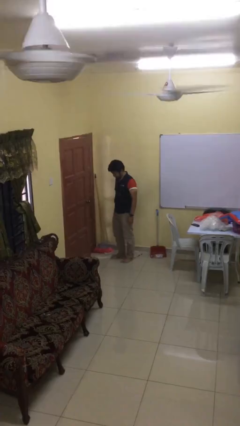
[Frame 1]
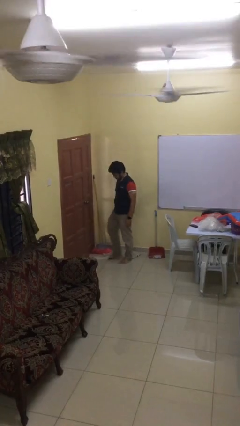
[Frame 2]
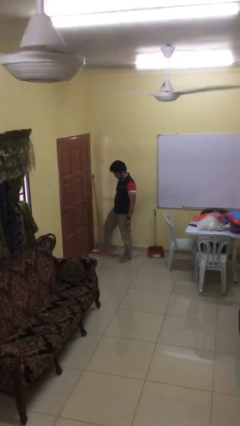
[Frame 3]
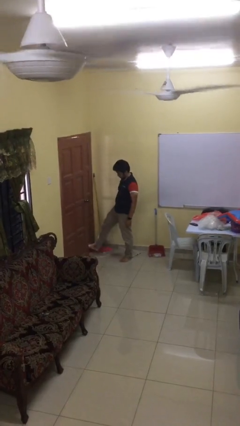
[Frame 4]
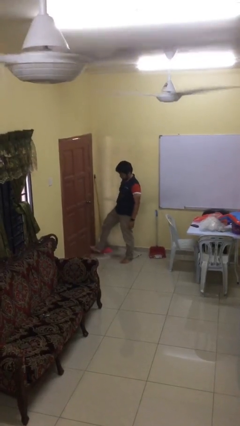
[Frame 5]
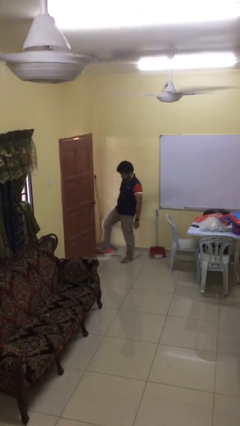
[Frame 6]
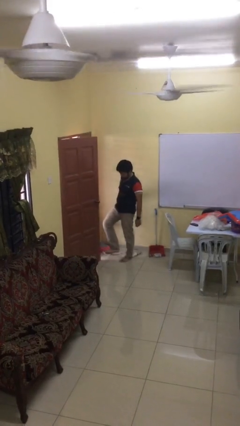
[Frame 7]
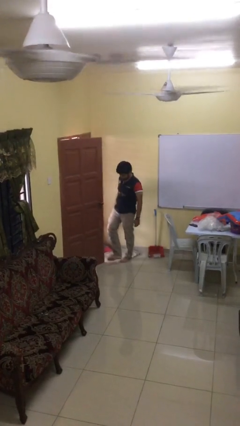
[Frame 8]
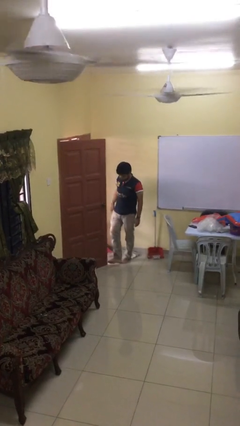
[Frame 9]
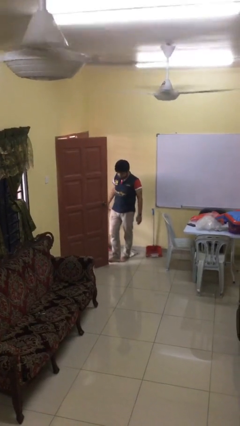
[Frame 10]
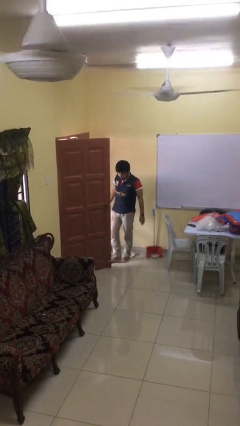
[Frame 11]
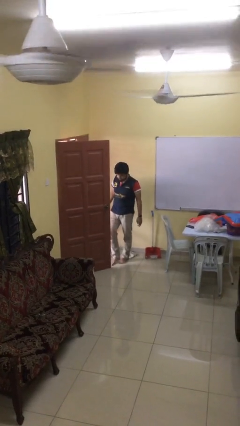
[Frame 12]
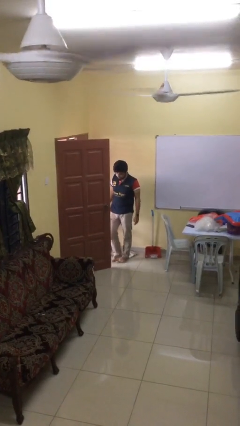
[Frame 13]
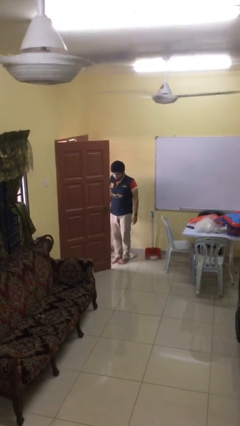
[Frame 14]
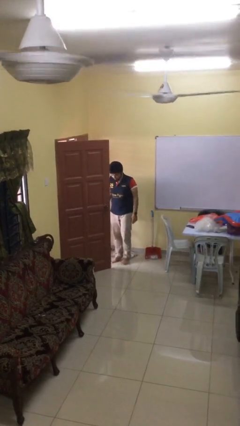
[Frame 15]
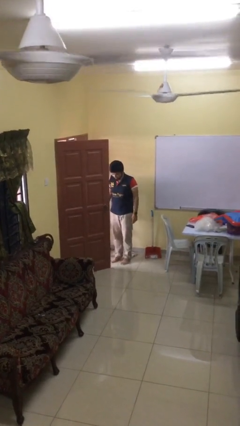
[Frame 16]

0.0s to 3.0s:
person opens facility door

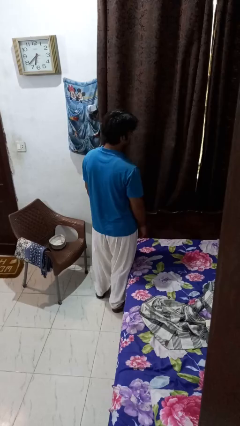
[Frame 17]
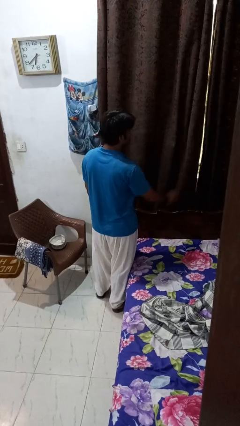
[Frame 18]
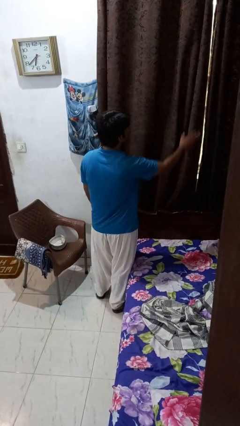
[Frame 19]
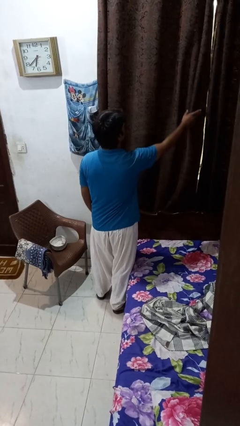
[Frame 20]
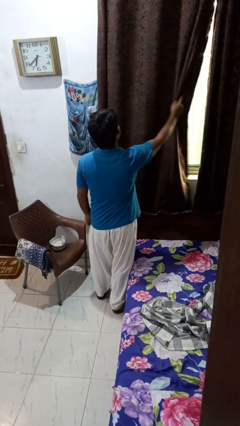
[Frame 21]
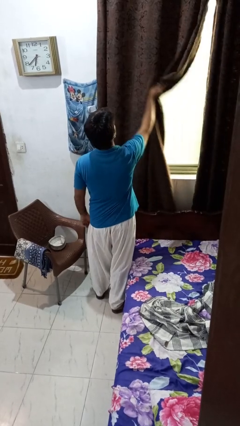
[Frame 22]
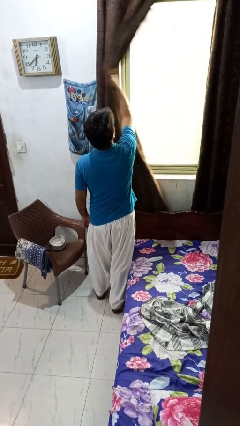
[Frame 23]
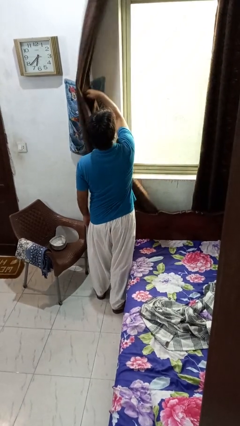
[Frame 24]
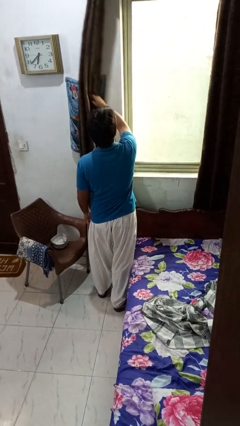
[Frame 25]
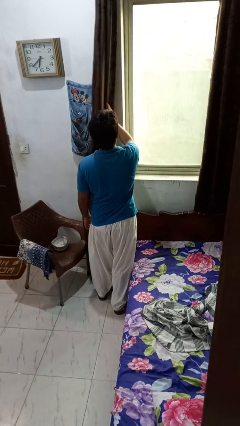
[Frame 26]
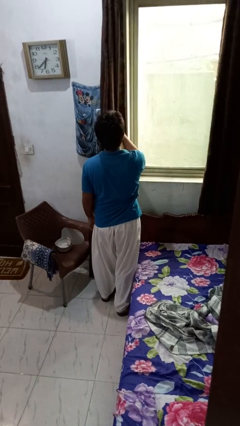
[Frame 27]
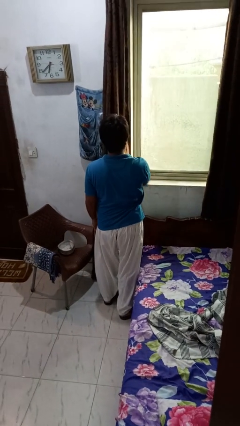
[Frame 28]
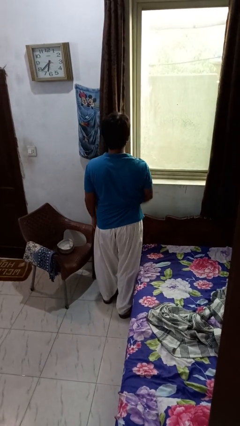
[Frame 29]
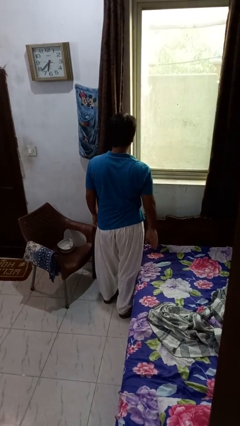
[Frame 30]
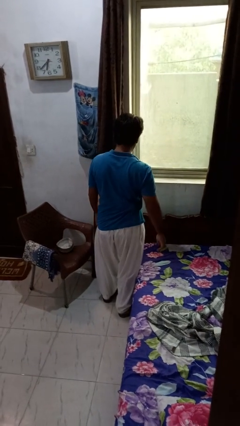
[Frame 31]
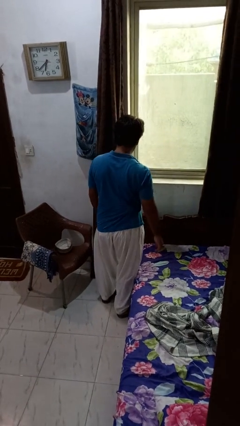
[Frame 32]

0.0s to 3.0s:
person opens curtains

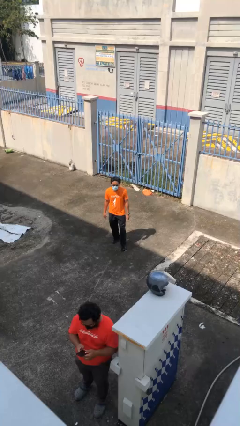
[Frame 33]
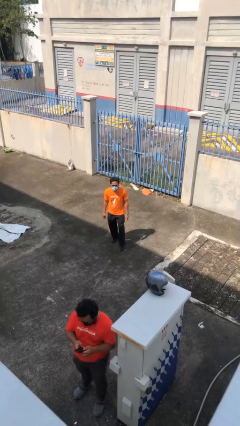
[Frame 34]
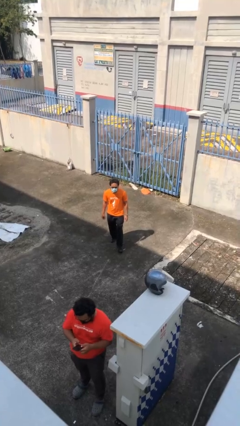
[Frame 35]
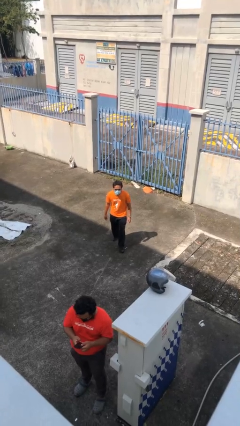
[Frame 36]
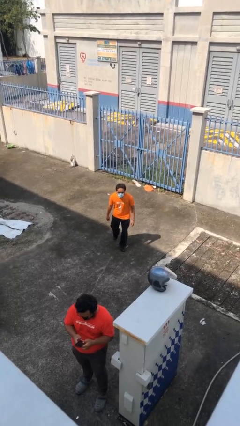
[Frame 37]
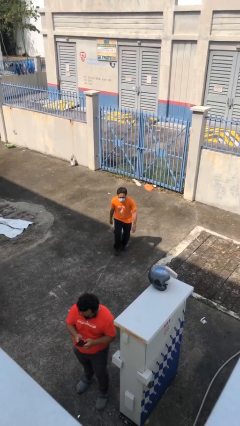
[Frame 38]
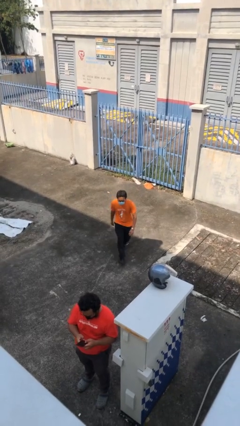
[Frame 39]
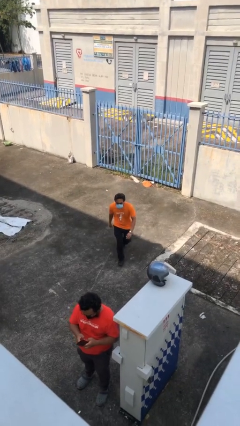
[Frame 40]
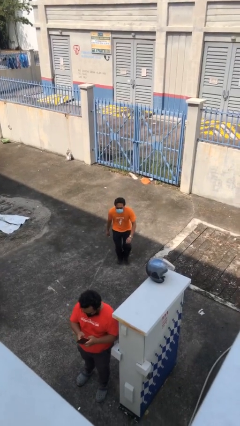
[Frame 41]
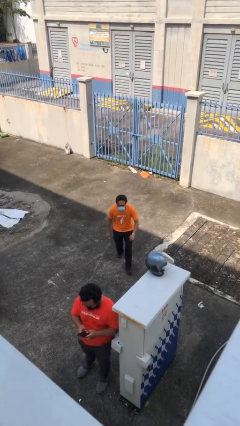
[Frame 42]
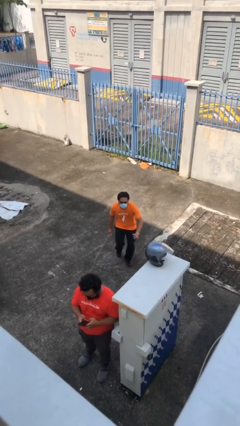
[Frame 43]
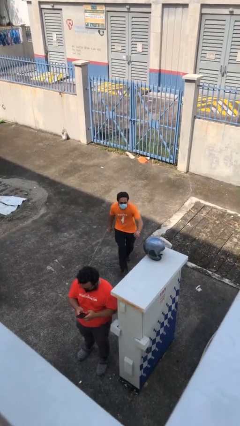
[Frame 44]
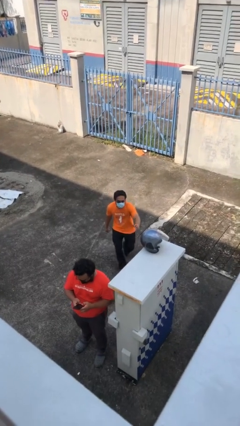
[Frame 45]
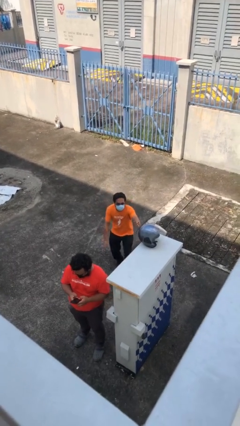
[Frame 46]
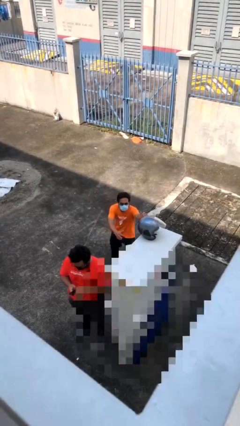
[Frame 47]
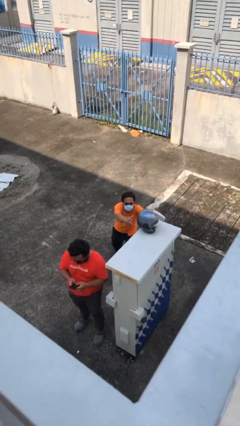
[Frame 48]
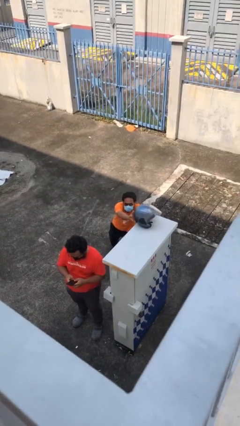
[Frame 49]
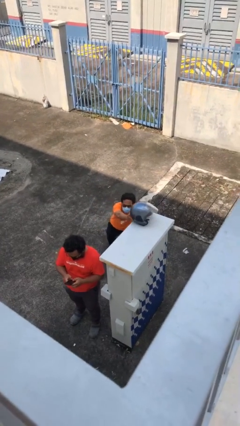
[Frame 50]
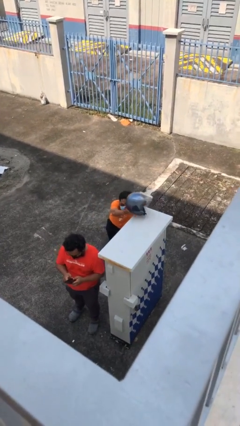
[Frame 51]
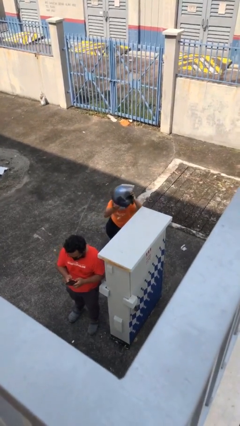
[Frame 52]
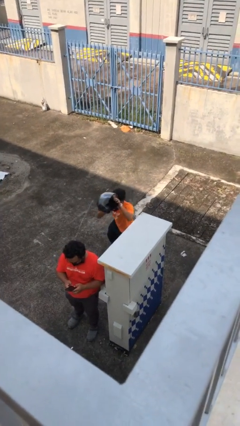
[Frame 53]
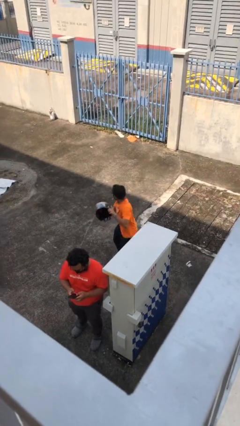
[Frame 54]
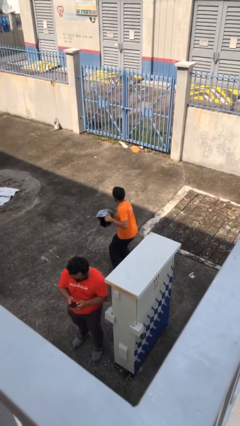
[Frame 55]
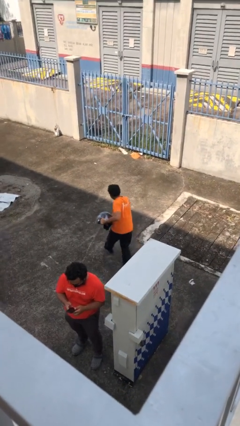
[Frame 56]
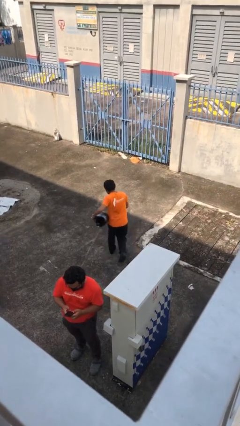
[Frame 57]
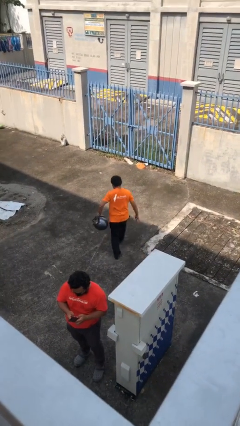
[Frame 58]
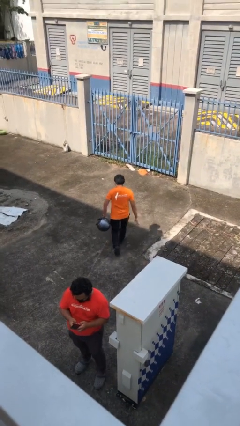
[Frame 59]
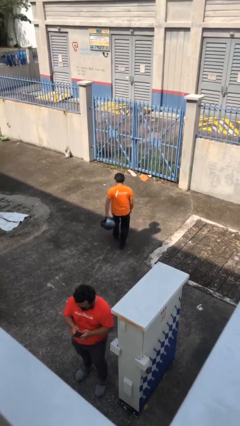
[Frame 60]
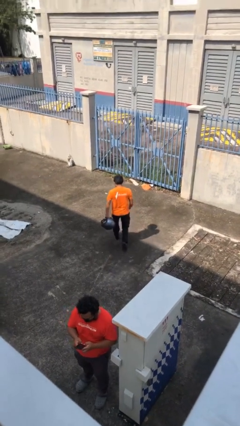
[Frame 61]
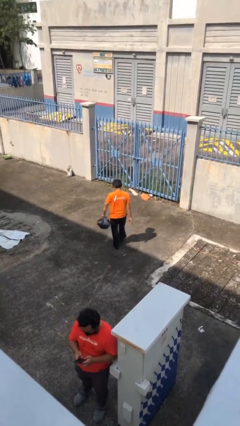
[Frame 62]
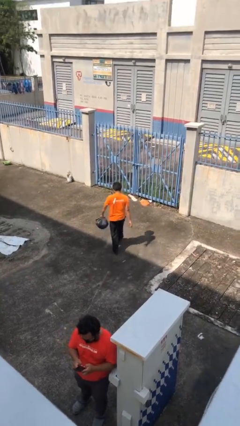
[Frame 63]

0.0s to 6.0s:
person steals object from person

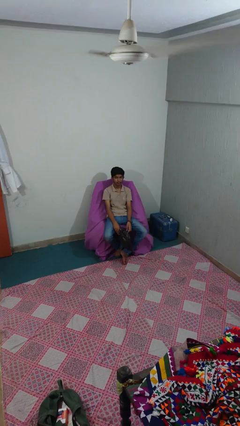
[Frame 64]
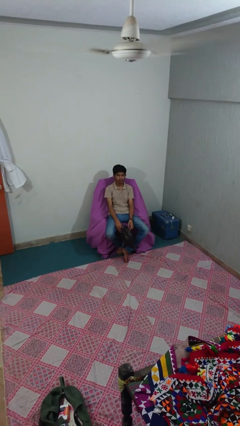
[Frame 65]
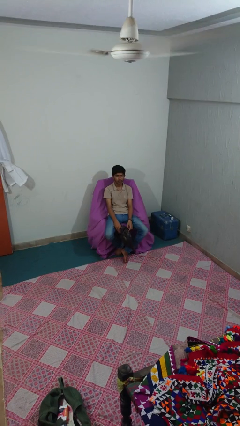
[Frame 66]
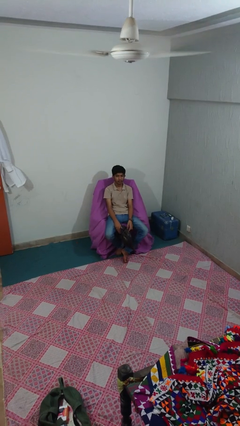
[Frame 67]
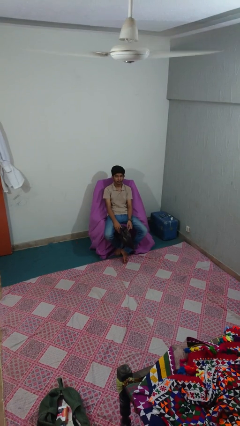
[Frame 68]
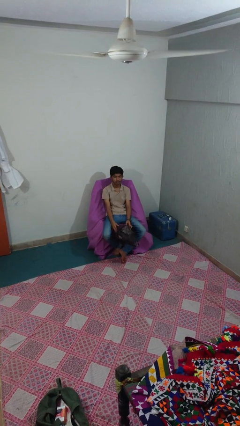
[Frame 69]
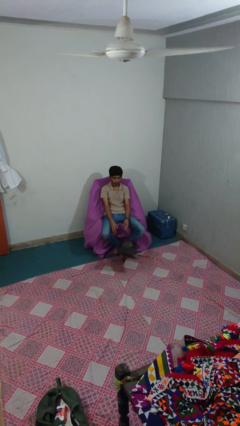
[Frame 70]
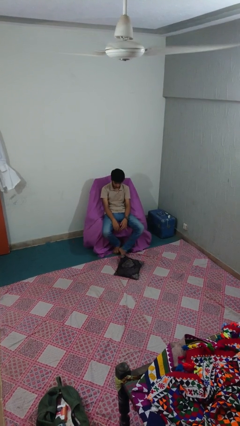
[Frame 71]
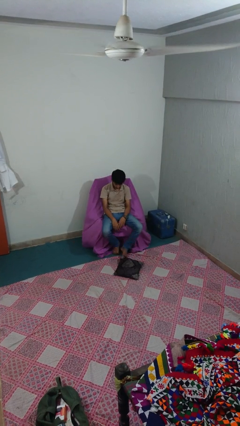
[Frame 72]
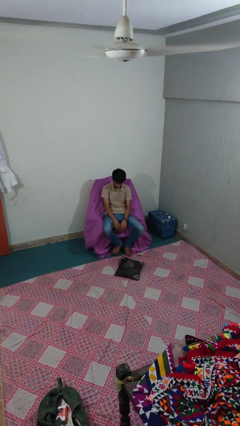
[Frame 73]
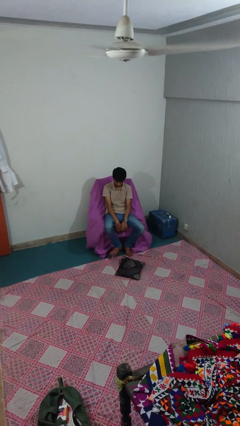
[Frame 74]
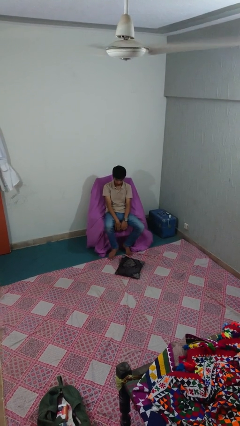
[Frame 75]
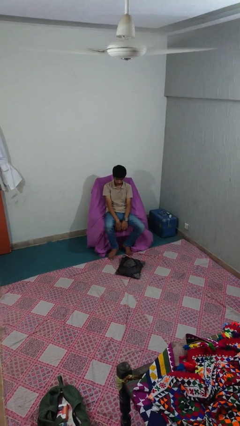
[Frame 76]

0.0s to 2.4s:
person drops object

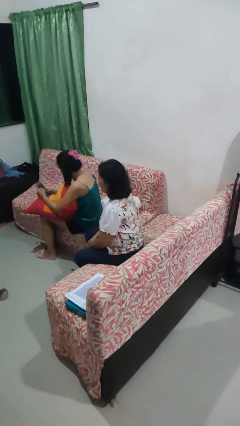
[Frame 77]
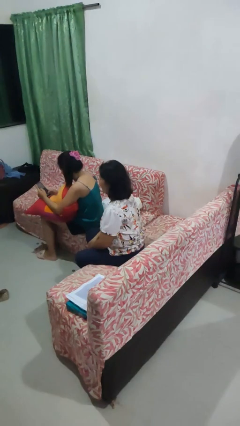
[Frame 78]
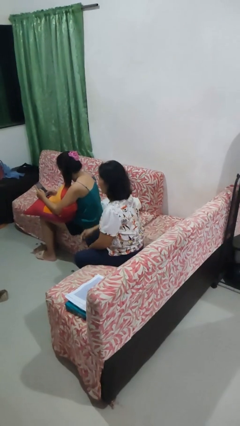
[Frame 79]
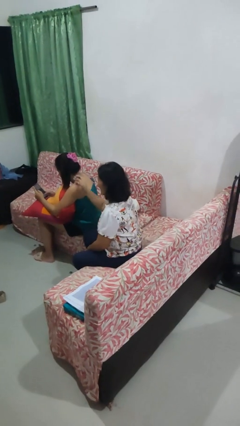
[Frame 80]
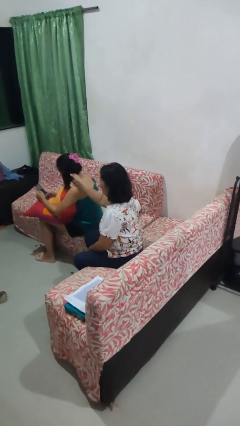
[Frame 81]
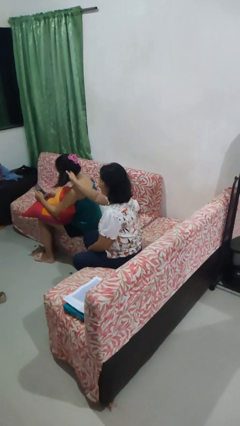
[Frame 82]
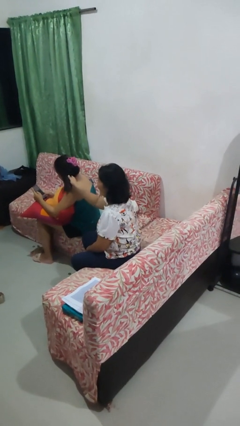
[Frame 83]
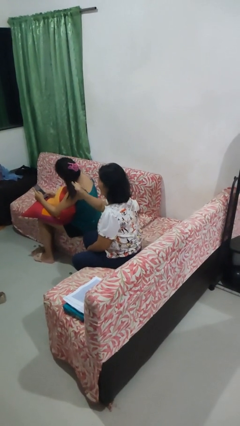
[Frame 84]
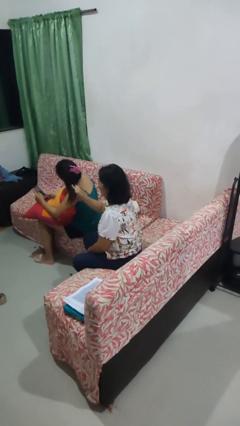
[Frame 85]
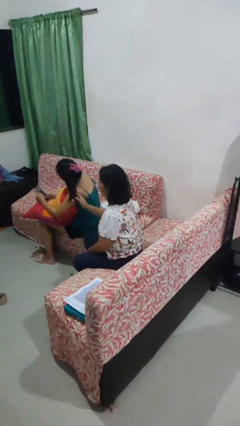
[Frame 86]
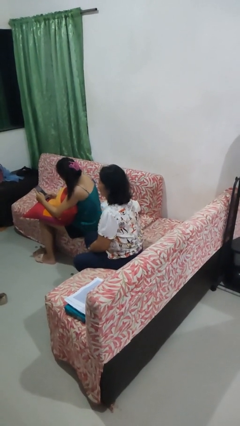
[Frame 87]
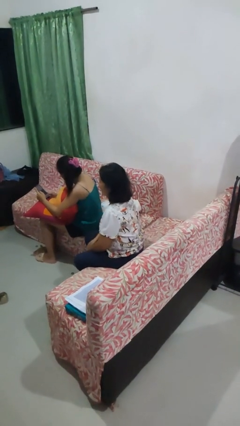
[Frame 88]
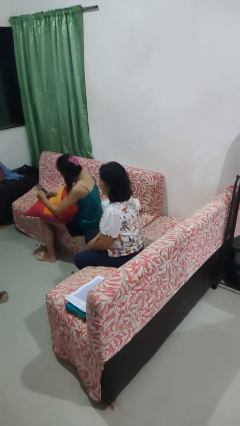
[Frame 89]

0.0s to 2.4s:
person grabs person by hair

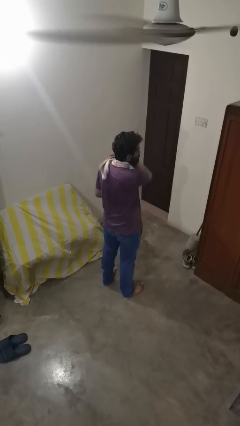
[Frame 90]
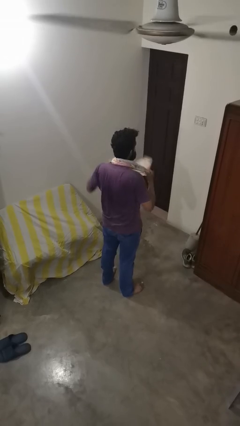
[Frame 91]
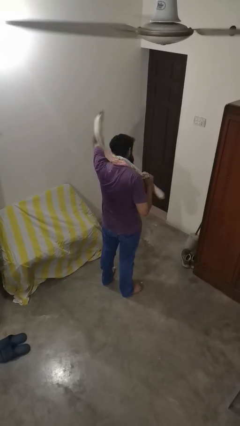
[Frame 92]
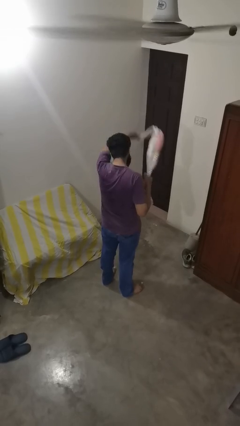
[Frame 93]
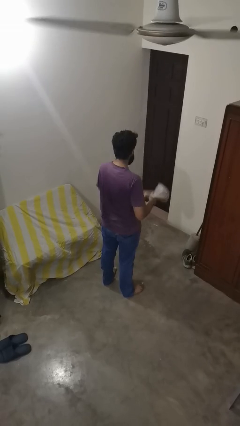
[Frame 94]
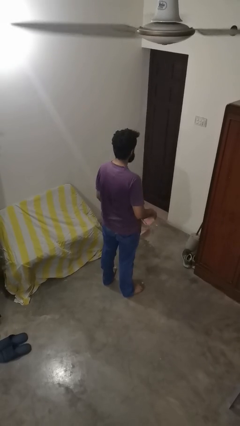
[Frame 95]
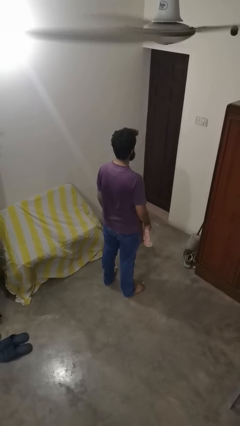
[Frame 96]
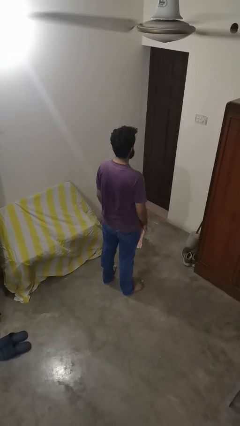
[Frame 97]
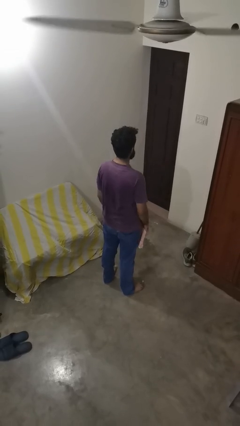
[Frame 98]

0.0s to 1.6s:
person takes off scarf
